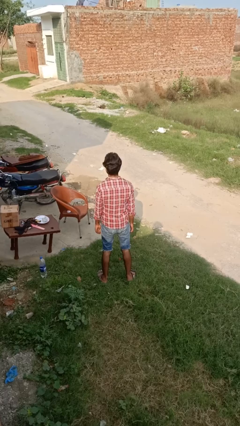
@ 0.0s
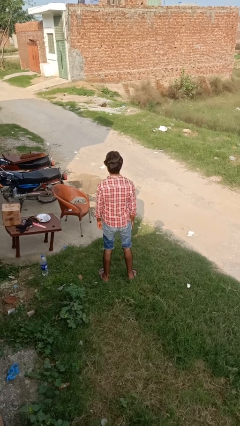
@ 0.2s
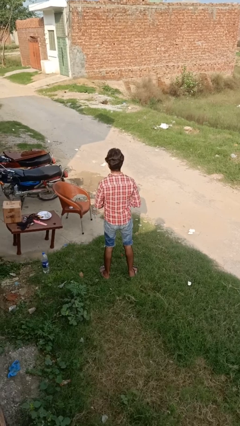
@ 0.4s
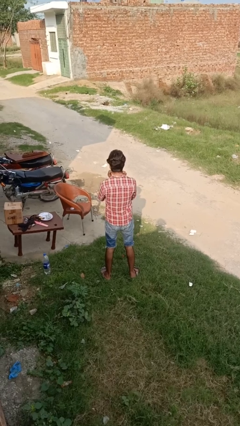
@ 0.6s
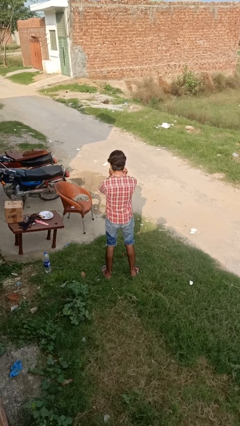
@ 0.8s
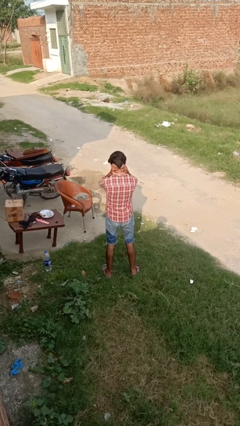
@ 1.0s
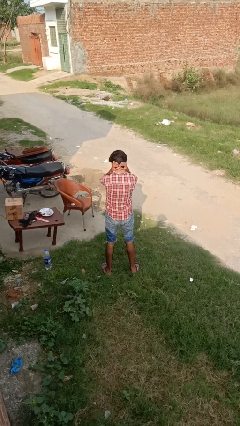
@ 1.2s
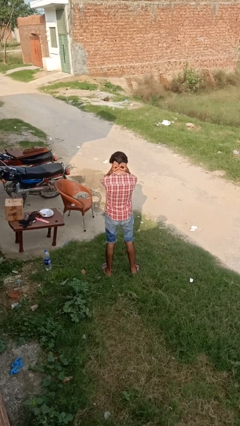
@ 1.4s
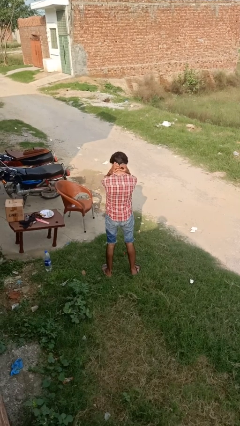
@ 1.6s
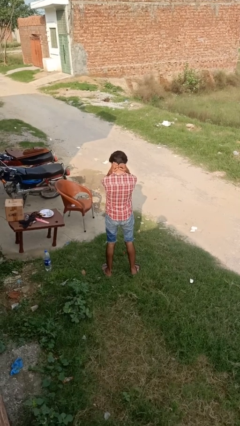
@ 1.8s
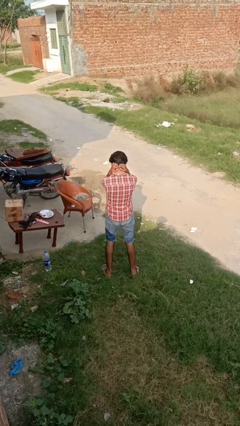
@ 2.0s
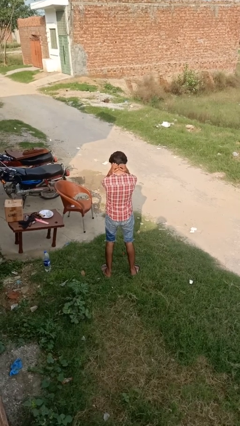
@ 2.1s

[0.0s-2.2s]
person puts on necklace

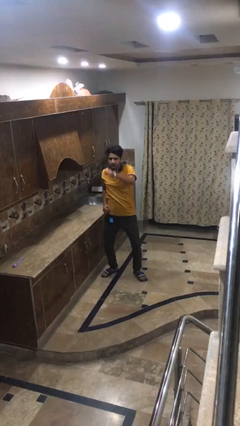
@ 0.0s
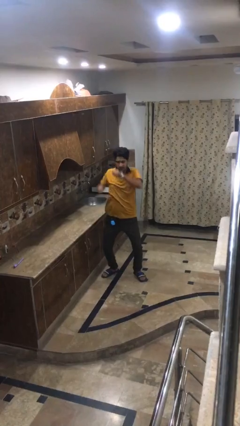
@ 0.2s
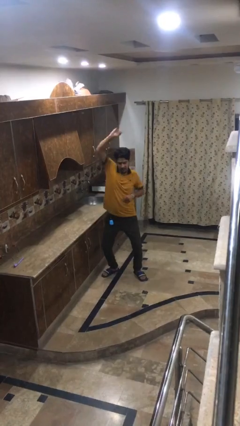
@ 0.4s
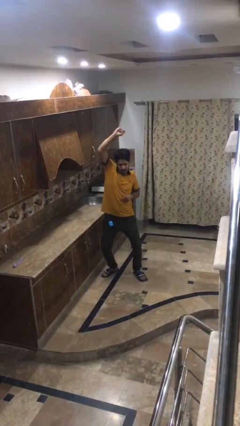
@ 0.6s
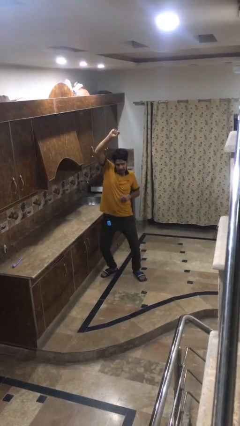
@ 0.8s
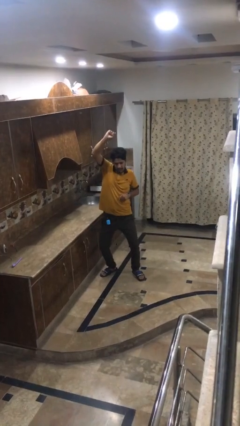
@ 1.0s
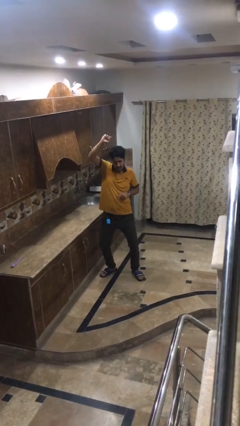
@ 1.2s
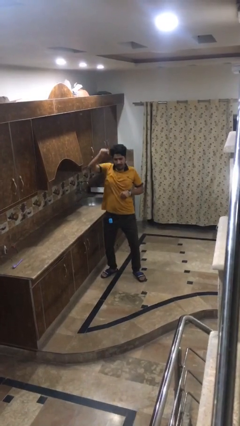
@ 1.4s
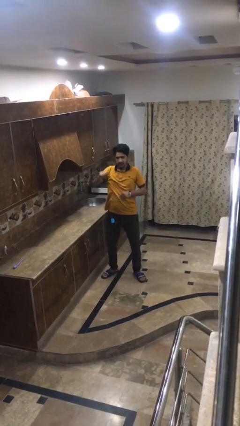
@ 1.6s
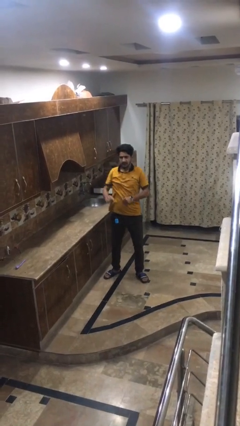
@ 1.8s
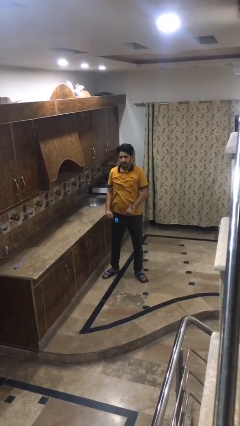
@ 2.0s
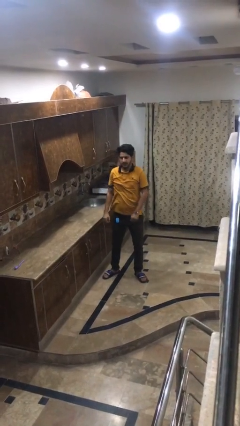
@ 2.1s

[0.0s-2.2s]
person punches

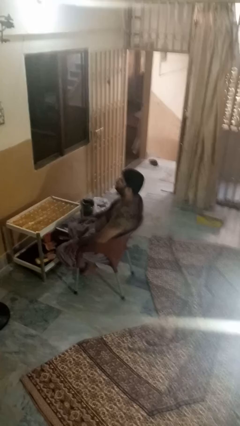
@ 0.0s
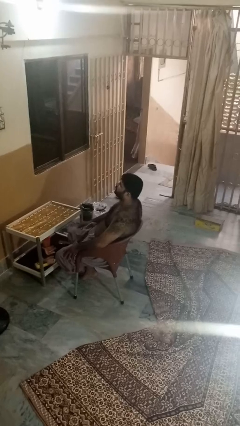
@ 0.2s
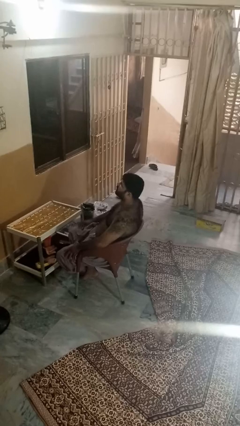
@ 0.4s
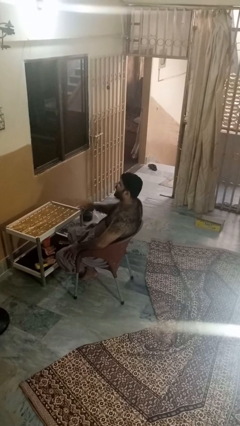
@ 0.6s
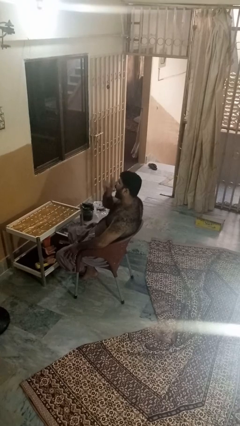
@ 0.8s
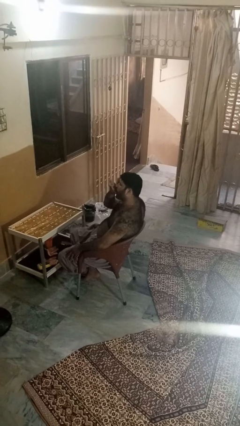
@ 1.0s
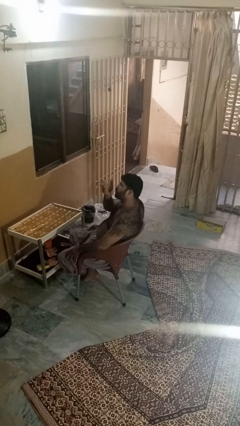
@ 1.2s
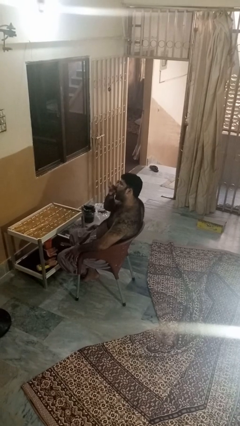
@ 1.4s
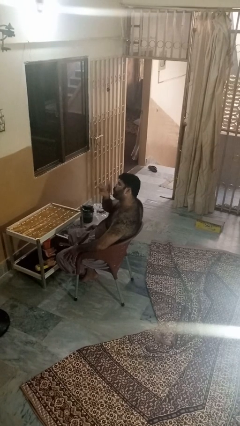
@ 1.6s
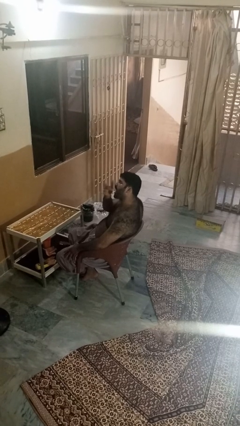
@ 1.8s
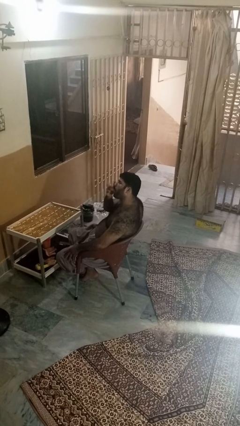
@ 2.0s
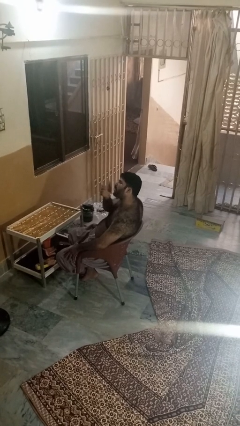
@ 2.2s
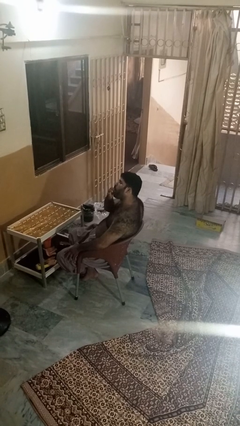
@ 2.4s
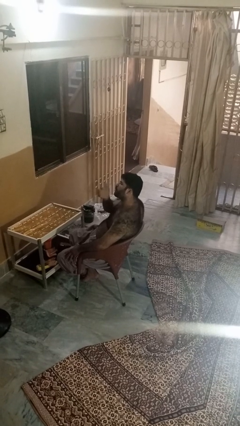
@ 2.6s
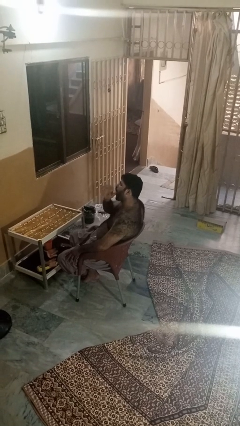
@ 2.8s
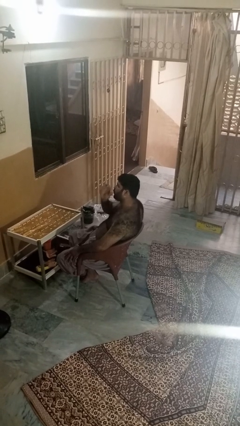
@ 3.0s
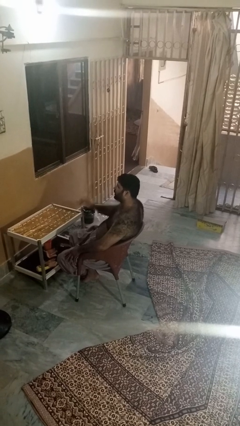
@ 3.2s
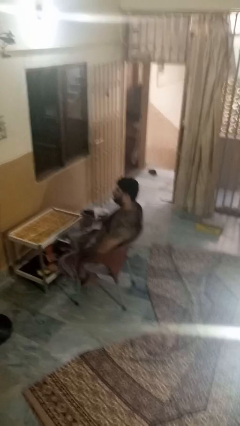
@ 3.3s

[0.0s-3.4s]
person licks fingers

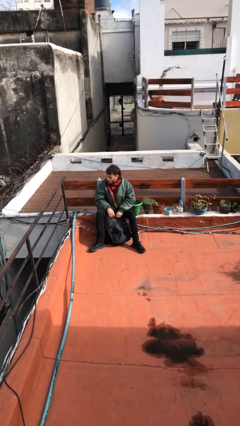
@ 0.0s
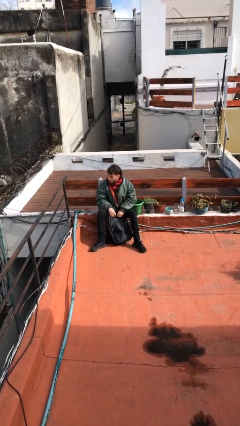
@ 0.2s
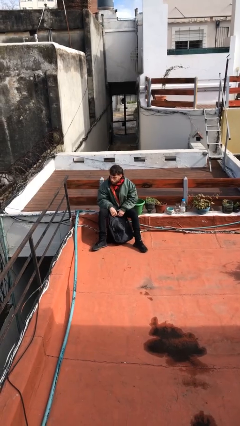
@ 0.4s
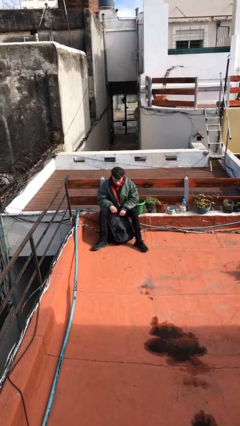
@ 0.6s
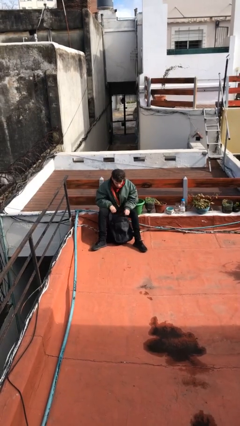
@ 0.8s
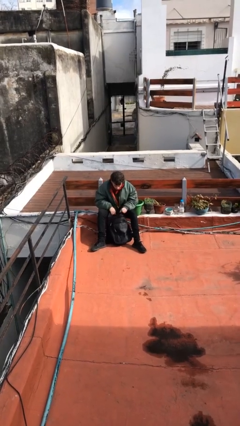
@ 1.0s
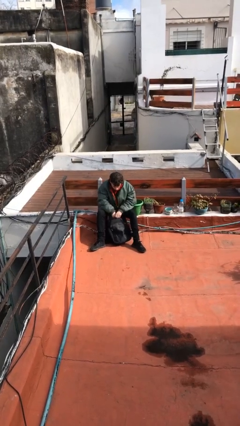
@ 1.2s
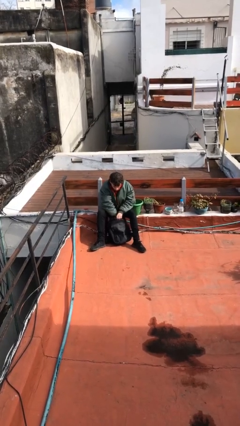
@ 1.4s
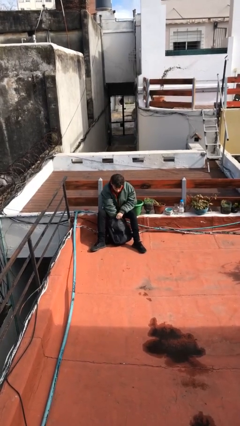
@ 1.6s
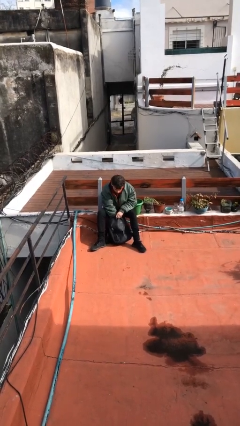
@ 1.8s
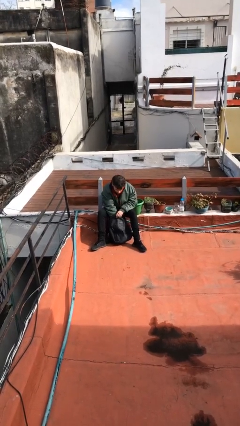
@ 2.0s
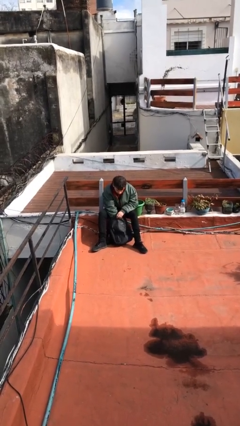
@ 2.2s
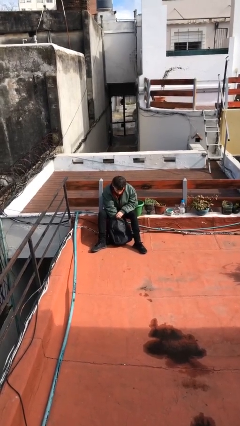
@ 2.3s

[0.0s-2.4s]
person searches in backpack

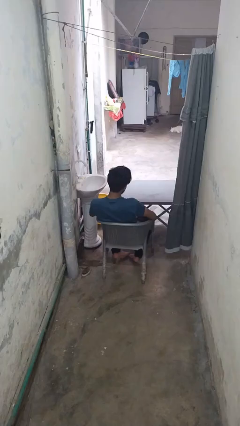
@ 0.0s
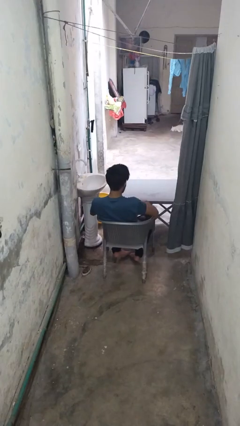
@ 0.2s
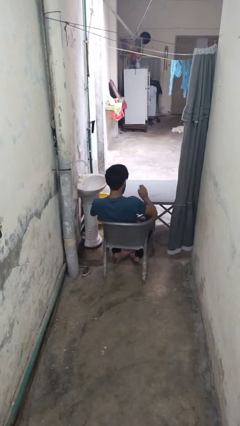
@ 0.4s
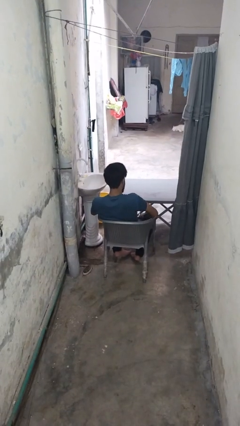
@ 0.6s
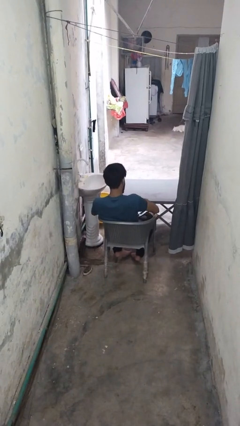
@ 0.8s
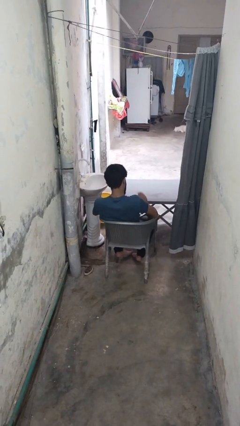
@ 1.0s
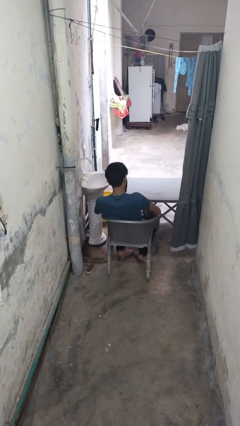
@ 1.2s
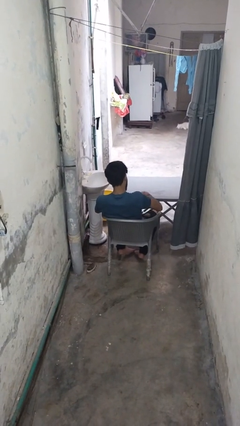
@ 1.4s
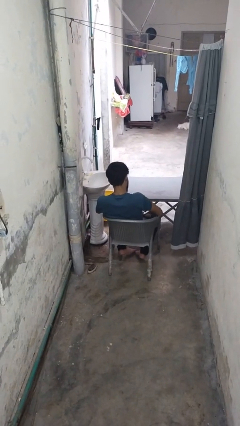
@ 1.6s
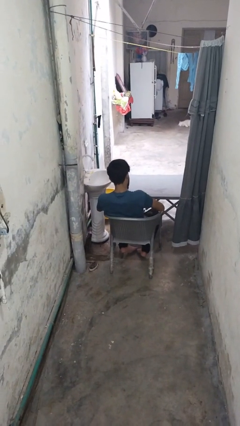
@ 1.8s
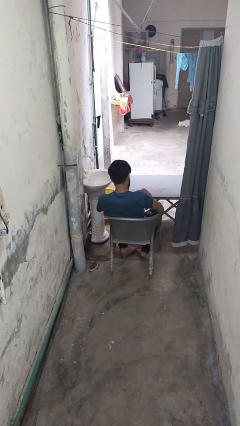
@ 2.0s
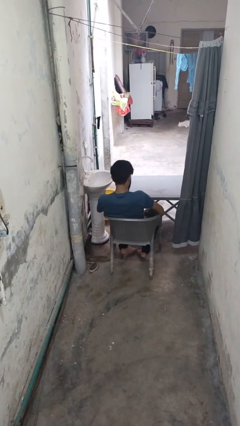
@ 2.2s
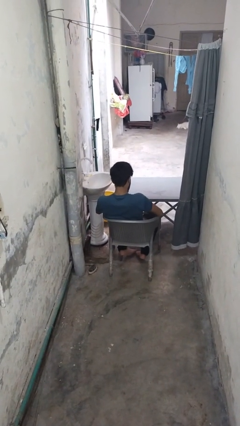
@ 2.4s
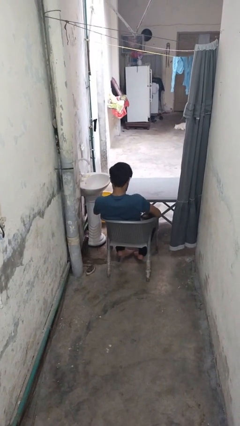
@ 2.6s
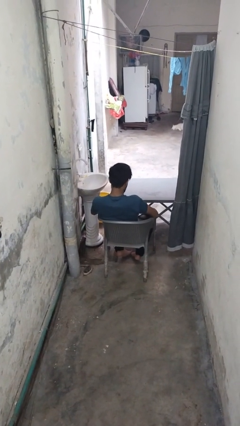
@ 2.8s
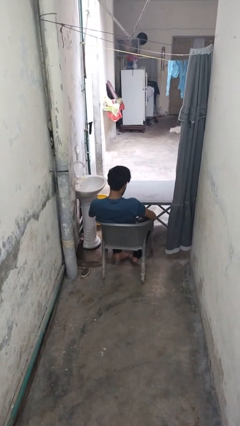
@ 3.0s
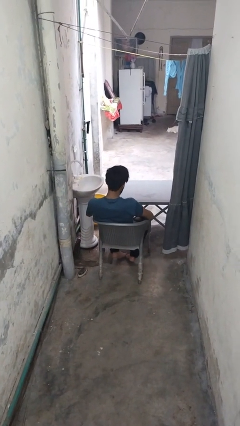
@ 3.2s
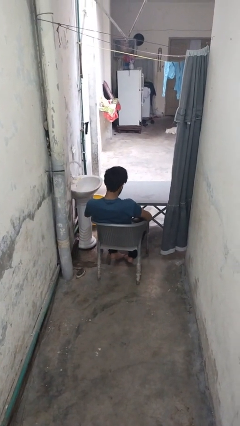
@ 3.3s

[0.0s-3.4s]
person slaps hands on thighs

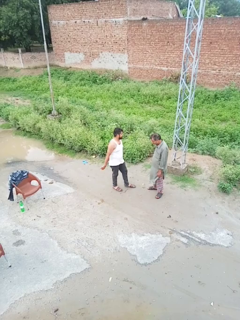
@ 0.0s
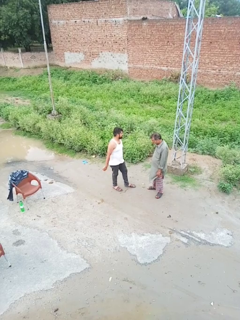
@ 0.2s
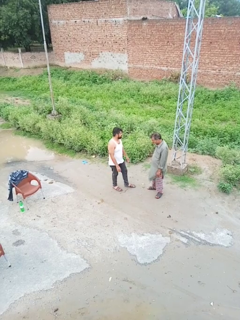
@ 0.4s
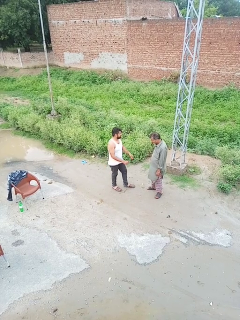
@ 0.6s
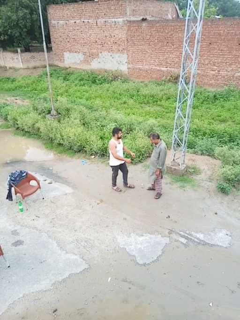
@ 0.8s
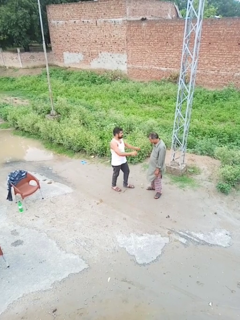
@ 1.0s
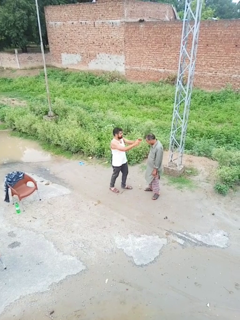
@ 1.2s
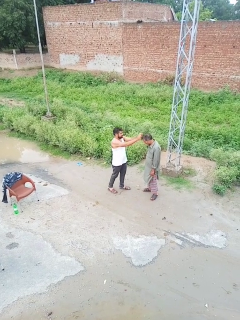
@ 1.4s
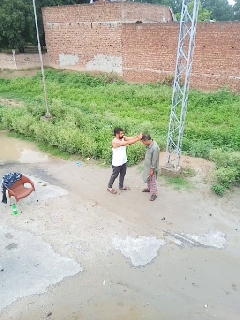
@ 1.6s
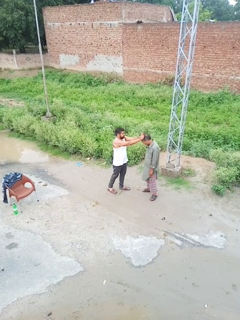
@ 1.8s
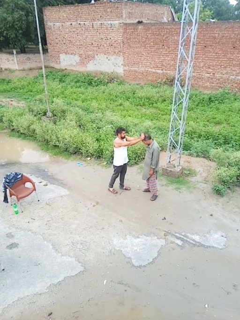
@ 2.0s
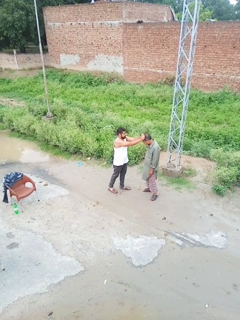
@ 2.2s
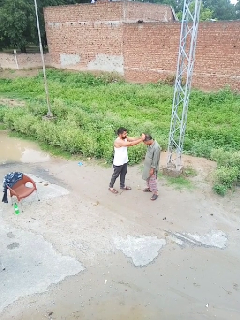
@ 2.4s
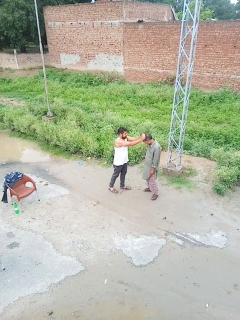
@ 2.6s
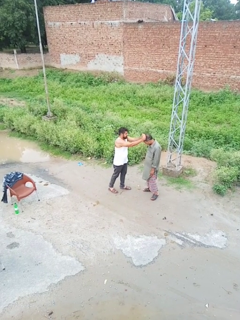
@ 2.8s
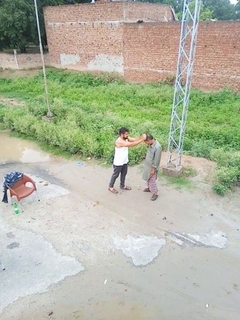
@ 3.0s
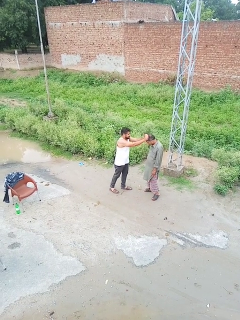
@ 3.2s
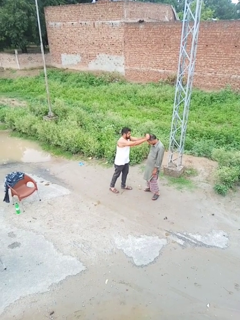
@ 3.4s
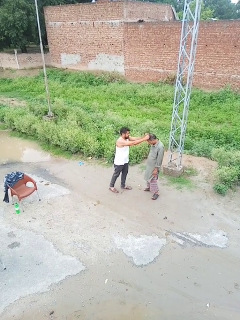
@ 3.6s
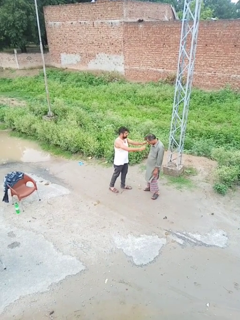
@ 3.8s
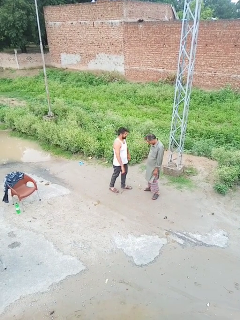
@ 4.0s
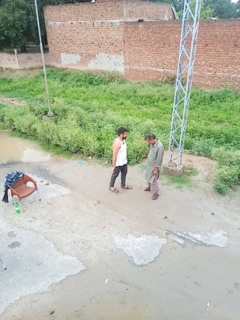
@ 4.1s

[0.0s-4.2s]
person grabs person by hair

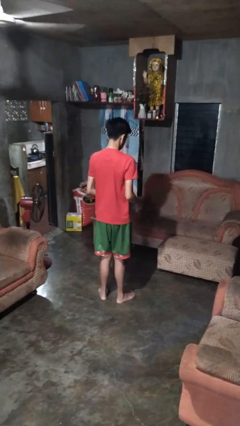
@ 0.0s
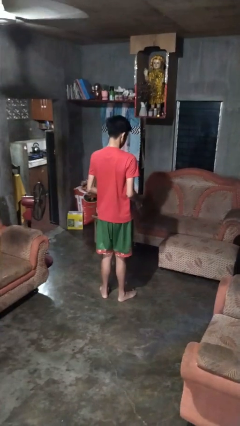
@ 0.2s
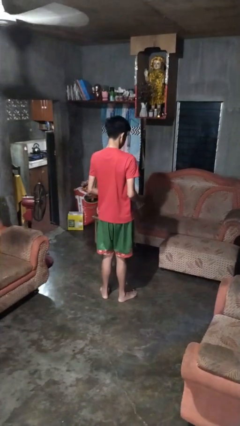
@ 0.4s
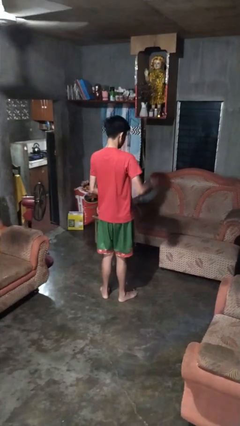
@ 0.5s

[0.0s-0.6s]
person bounces ball on floor
